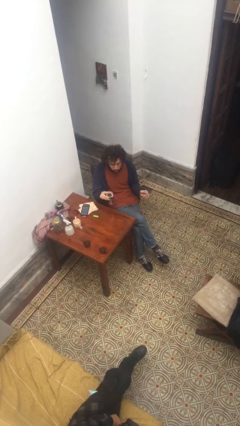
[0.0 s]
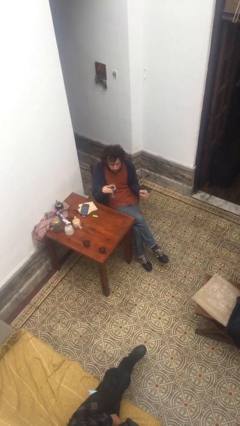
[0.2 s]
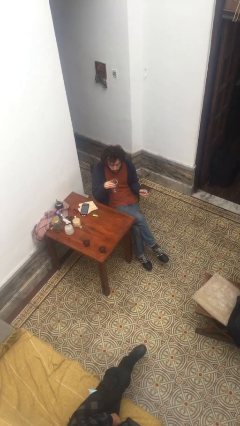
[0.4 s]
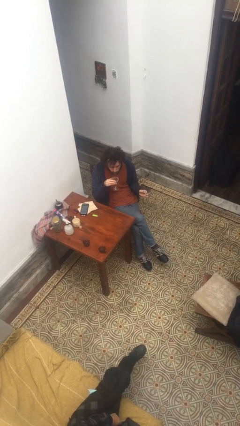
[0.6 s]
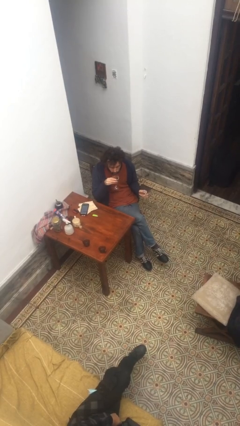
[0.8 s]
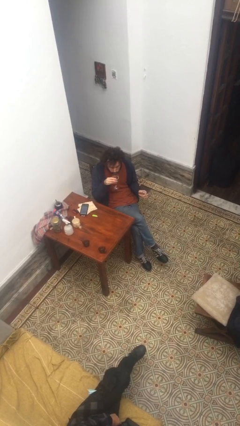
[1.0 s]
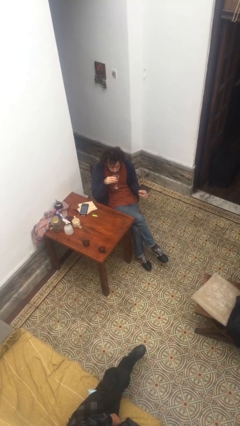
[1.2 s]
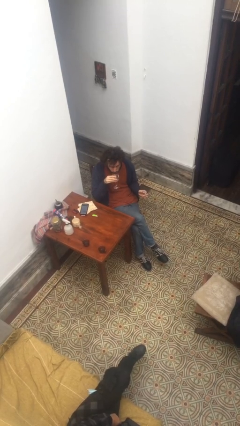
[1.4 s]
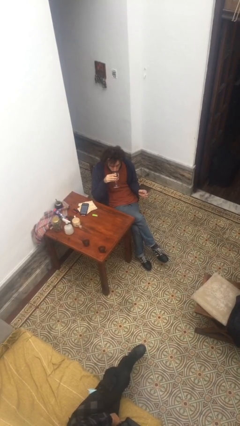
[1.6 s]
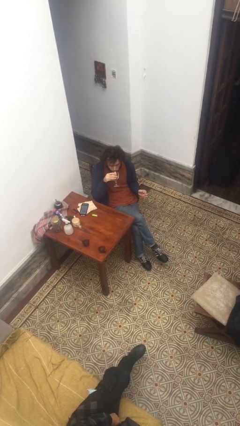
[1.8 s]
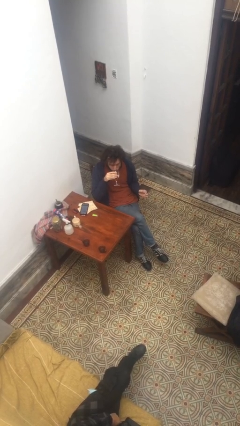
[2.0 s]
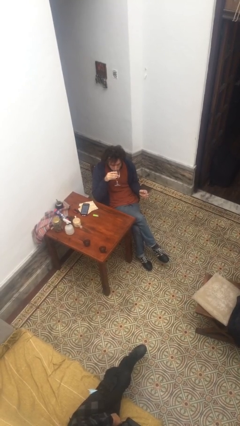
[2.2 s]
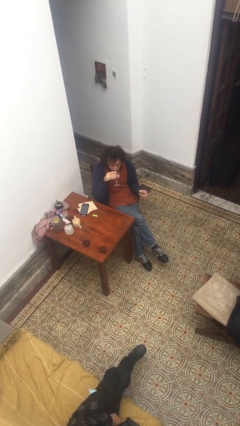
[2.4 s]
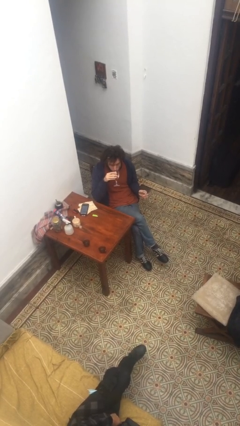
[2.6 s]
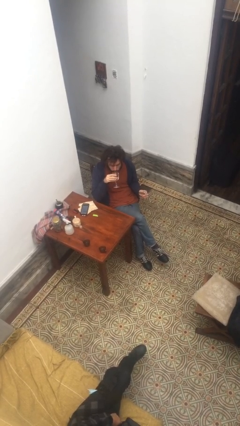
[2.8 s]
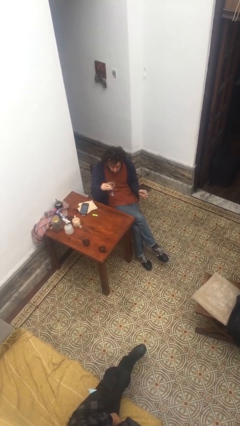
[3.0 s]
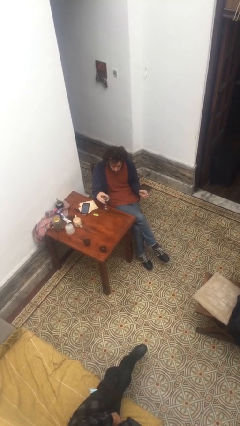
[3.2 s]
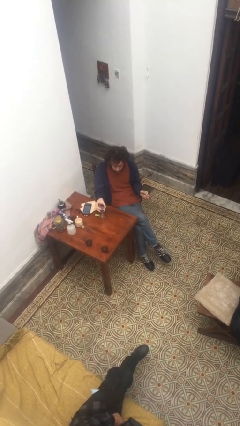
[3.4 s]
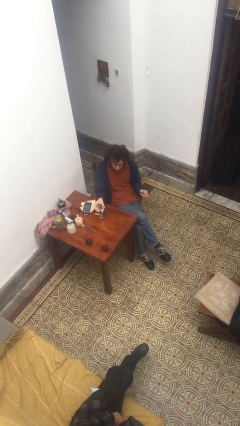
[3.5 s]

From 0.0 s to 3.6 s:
person drinks from cup

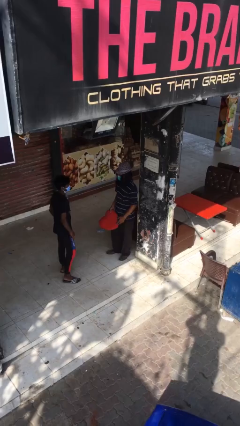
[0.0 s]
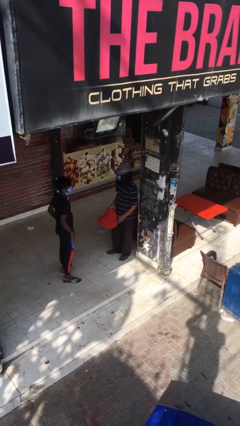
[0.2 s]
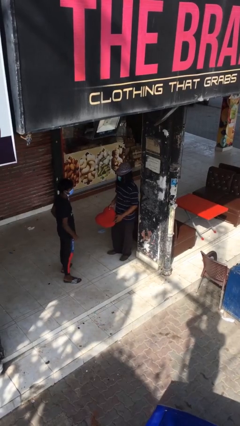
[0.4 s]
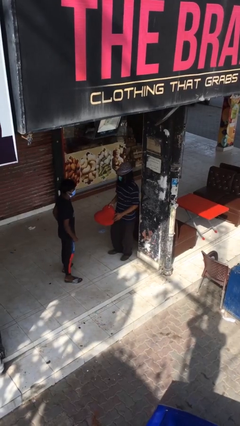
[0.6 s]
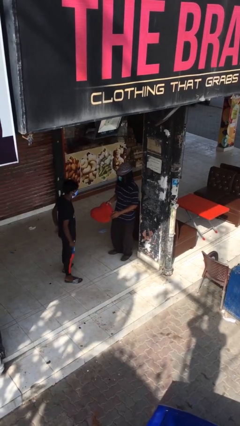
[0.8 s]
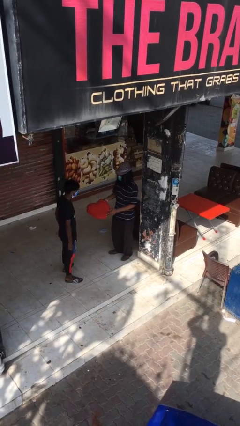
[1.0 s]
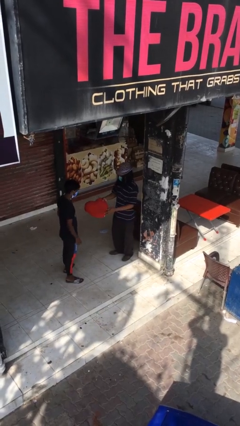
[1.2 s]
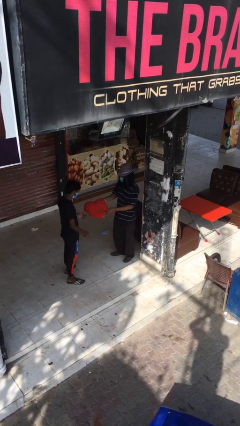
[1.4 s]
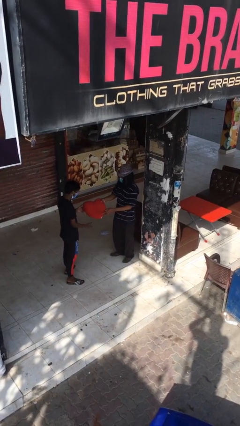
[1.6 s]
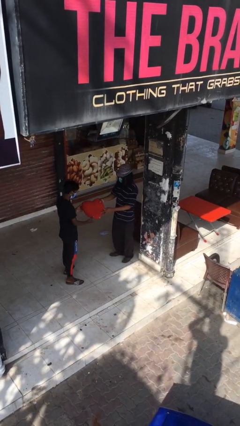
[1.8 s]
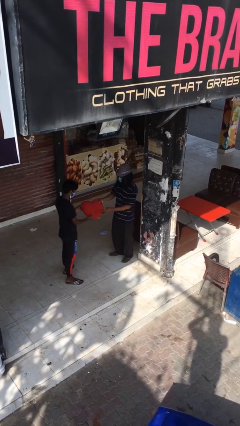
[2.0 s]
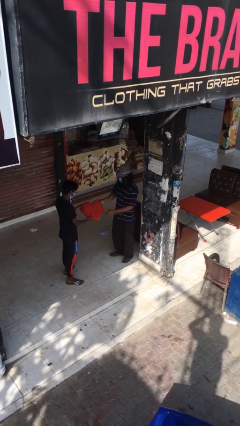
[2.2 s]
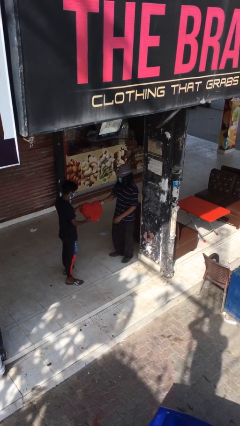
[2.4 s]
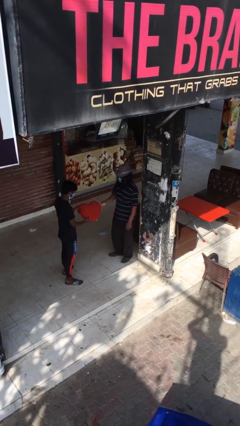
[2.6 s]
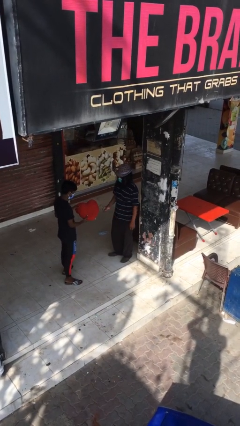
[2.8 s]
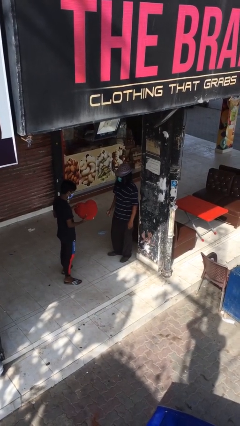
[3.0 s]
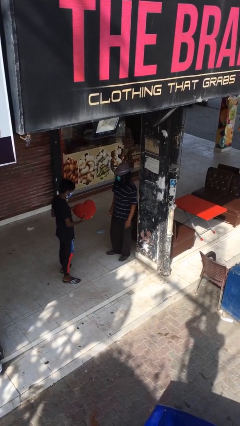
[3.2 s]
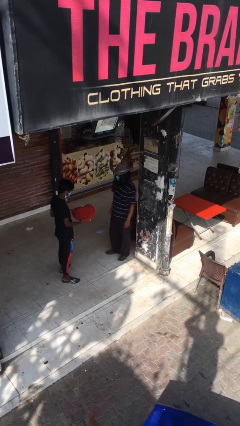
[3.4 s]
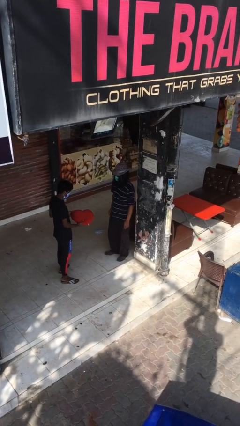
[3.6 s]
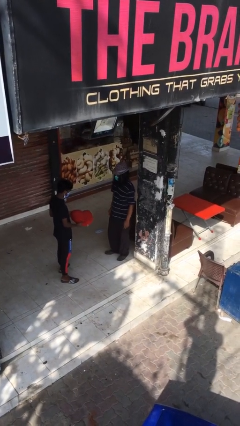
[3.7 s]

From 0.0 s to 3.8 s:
person transfers object to person

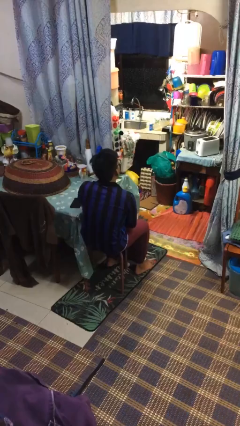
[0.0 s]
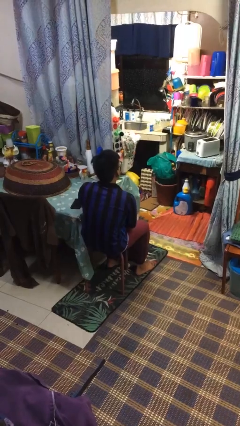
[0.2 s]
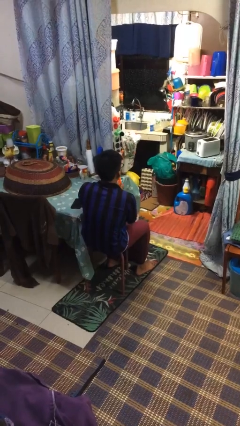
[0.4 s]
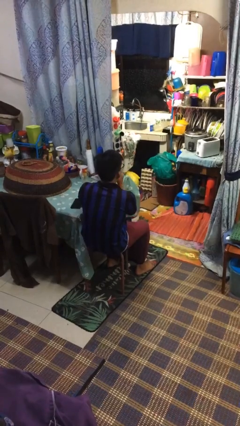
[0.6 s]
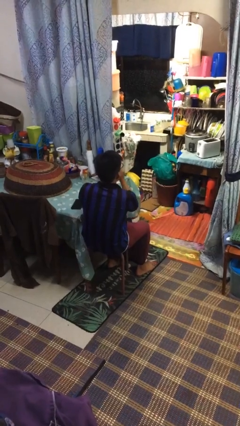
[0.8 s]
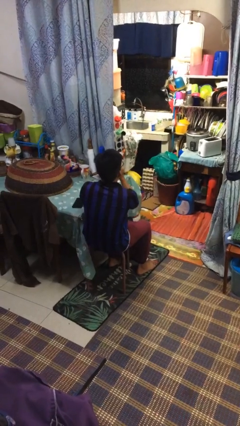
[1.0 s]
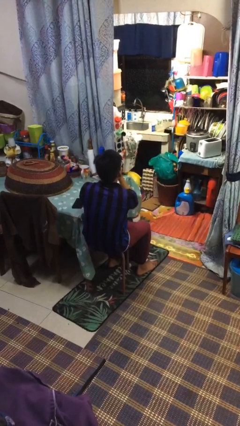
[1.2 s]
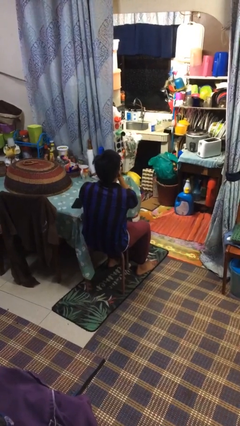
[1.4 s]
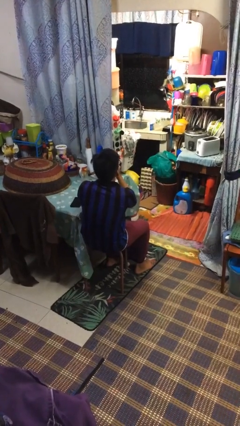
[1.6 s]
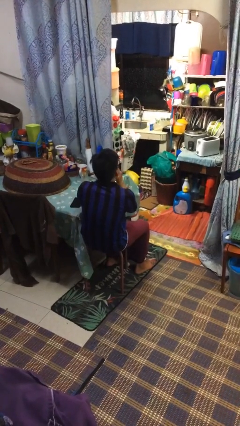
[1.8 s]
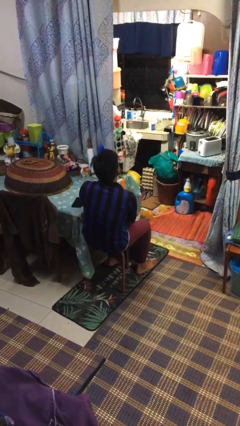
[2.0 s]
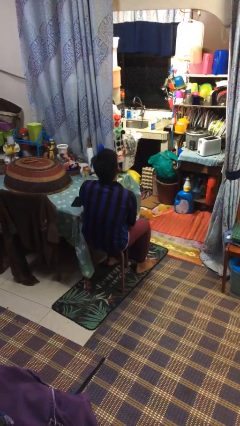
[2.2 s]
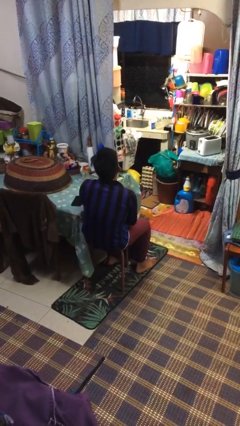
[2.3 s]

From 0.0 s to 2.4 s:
person vapes

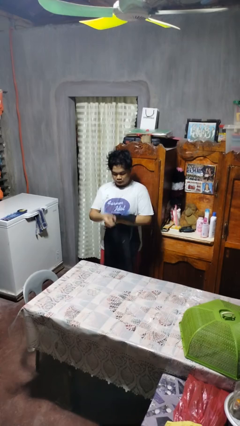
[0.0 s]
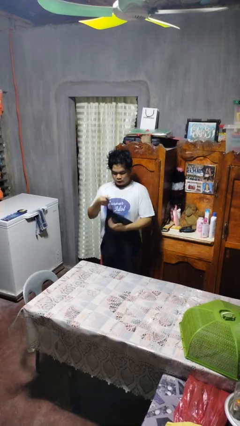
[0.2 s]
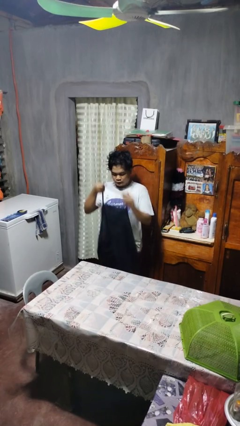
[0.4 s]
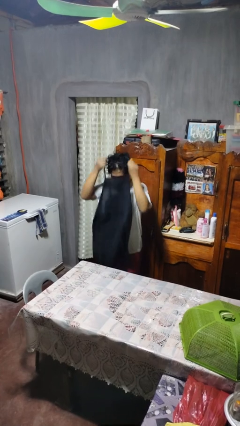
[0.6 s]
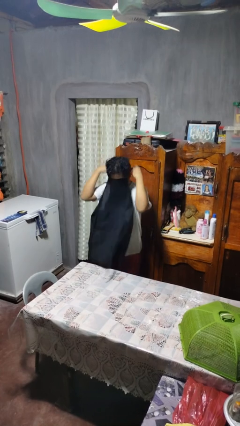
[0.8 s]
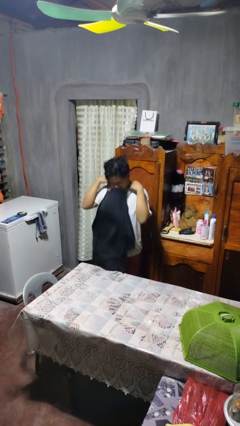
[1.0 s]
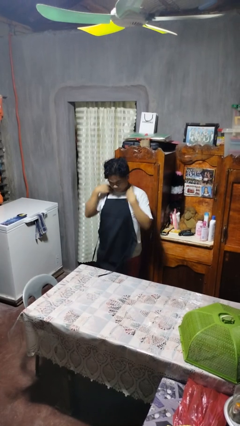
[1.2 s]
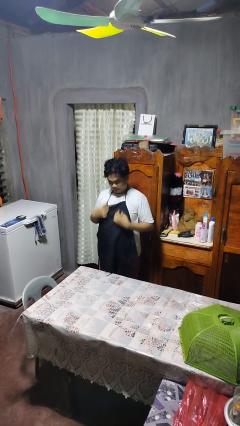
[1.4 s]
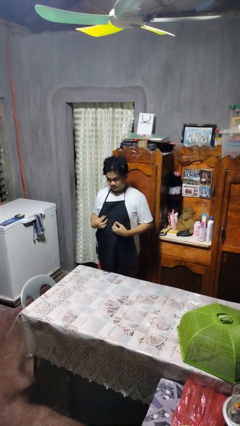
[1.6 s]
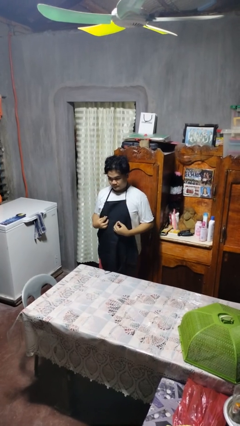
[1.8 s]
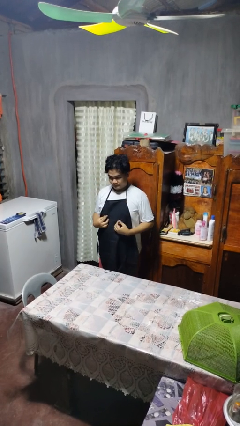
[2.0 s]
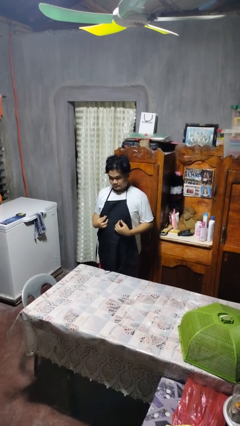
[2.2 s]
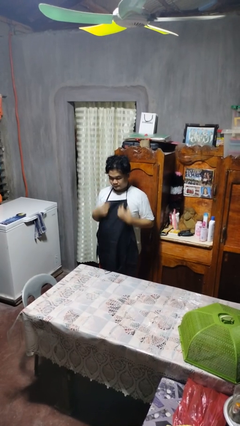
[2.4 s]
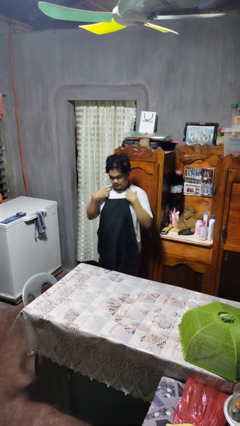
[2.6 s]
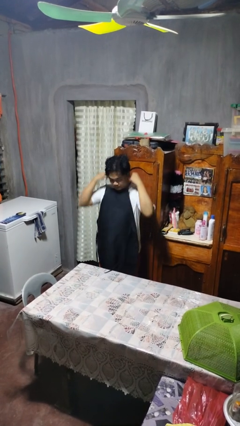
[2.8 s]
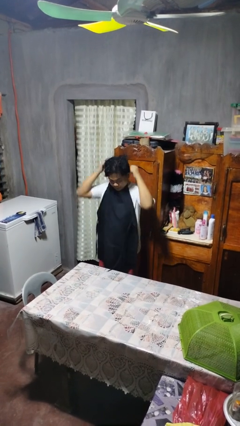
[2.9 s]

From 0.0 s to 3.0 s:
person puts on apron

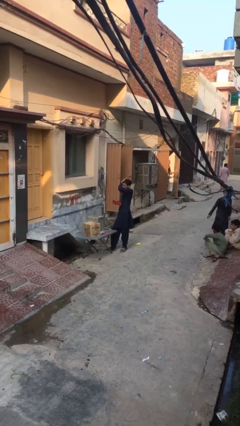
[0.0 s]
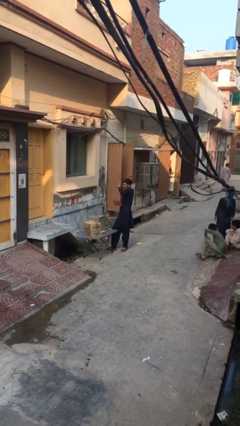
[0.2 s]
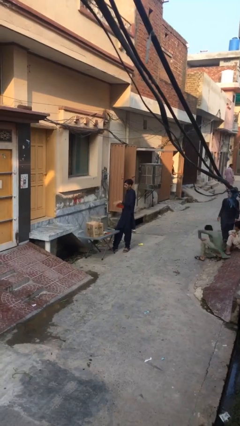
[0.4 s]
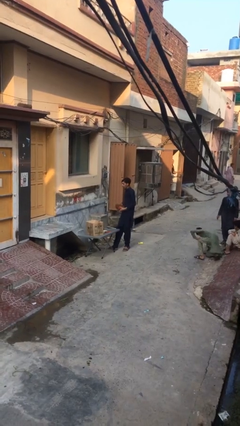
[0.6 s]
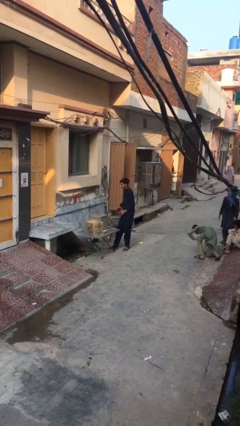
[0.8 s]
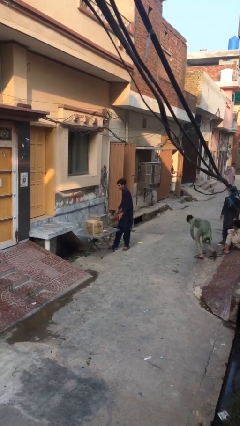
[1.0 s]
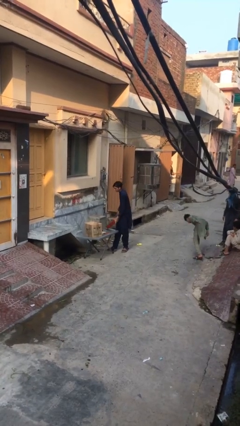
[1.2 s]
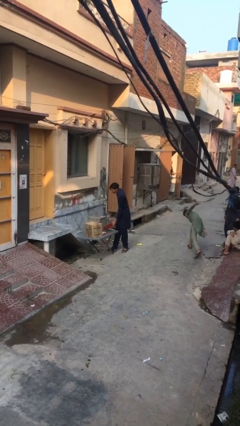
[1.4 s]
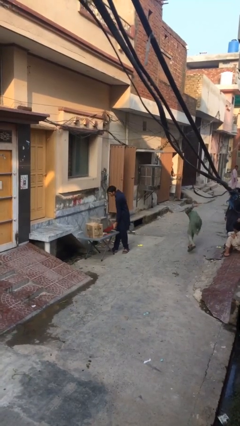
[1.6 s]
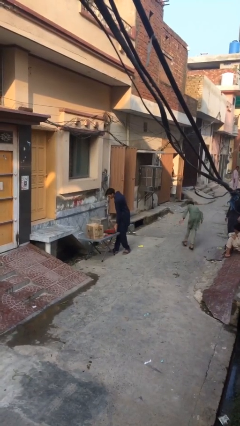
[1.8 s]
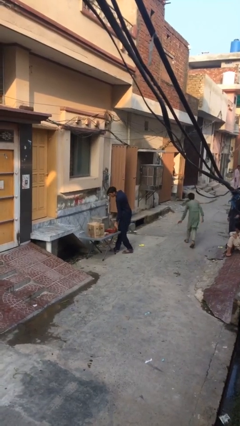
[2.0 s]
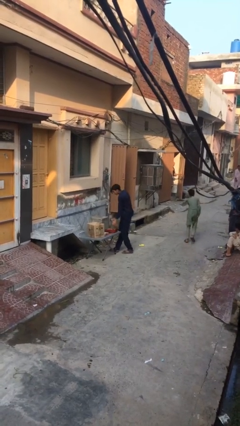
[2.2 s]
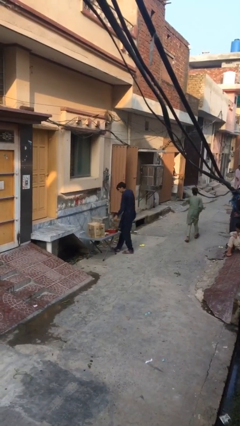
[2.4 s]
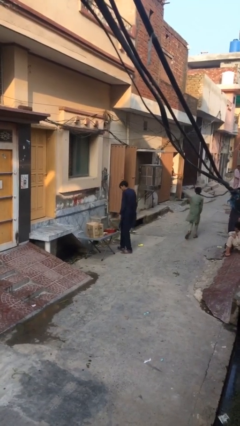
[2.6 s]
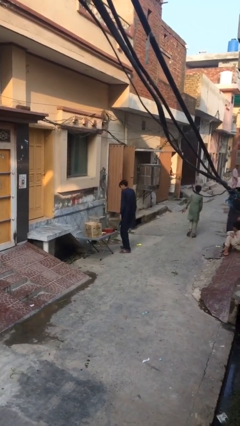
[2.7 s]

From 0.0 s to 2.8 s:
person puts down object on table

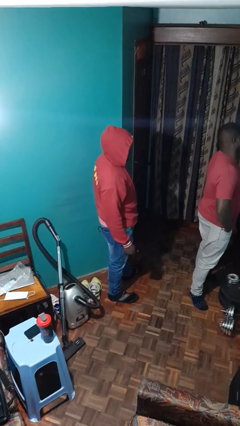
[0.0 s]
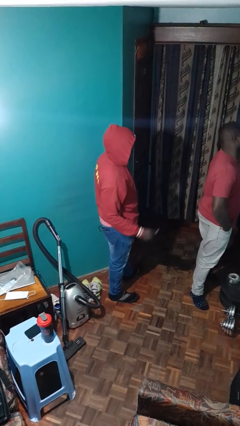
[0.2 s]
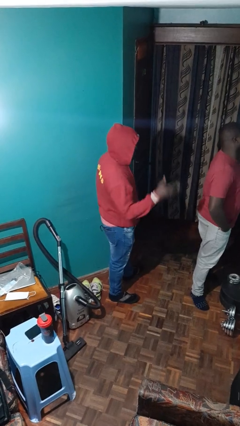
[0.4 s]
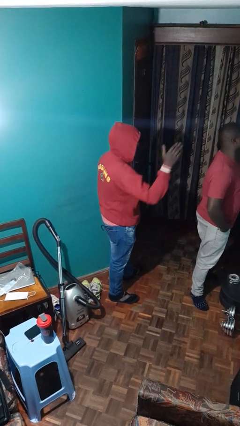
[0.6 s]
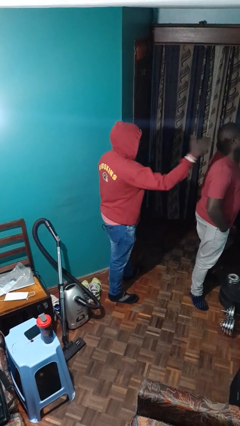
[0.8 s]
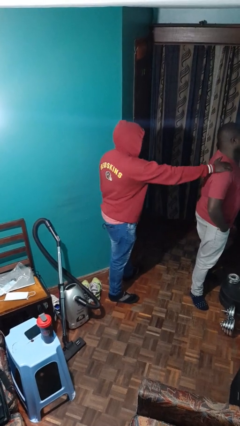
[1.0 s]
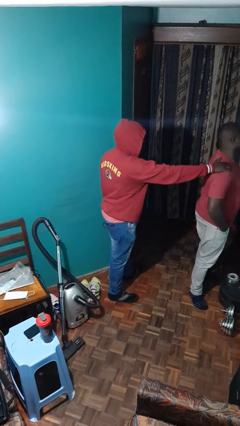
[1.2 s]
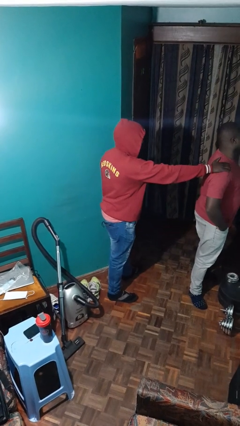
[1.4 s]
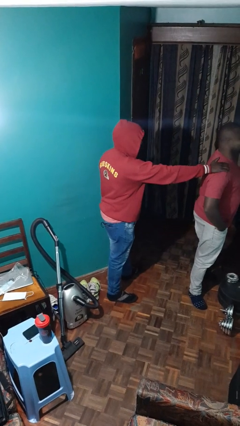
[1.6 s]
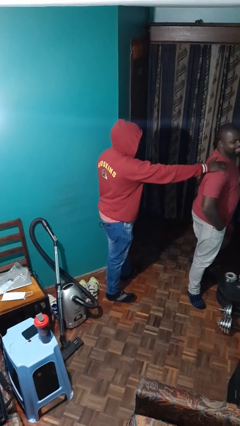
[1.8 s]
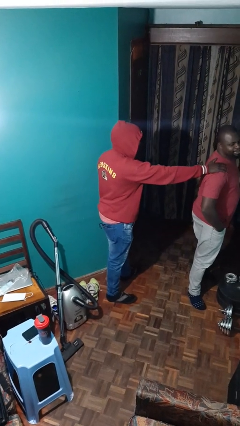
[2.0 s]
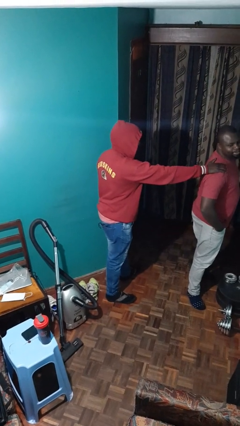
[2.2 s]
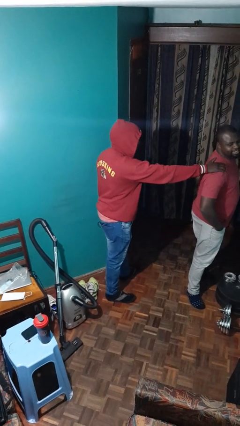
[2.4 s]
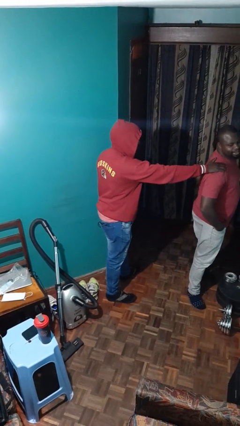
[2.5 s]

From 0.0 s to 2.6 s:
person grabs person by shoulder
